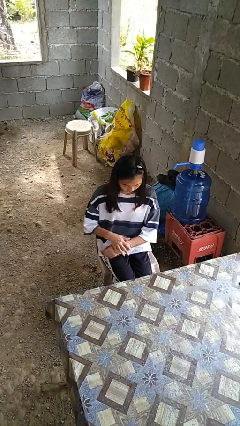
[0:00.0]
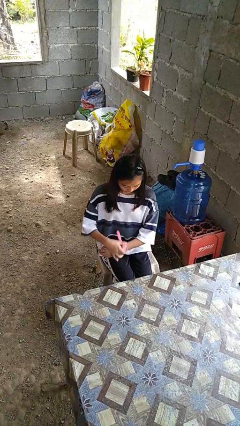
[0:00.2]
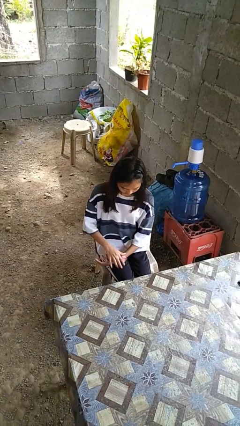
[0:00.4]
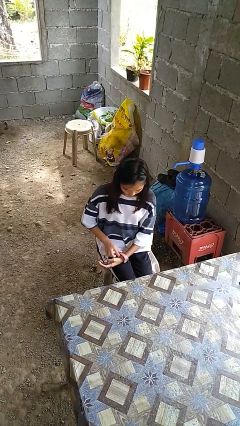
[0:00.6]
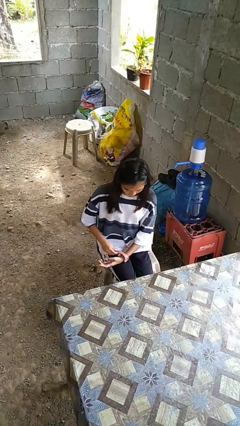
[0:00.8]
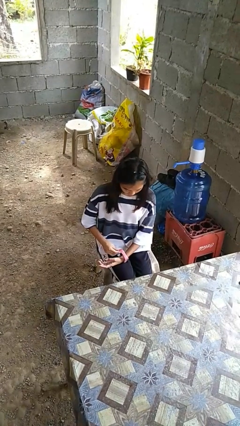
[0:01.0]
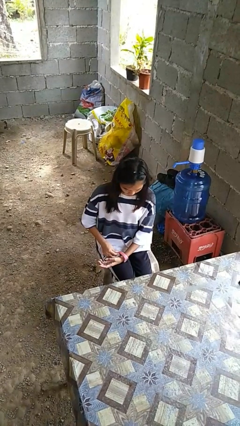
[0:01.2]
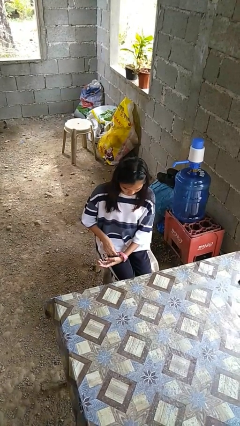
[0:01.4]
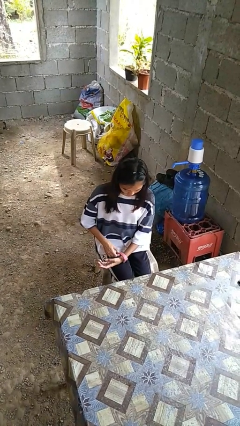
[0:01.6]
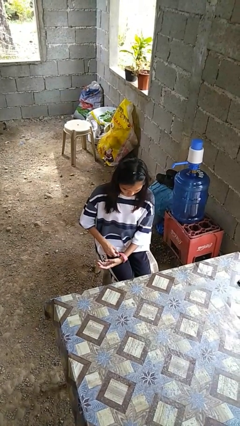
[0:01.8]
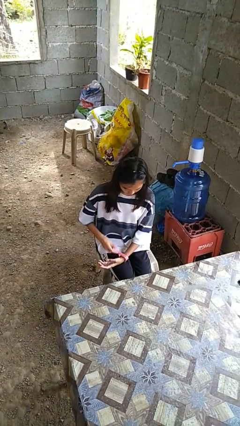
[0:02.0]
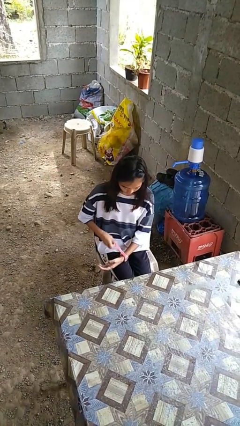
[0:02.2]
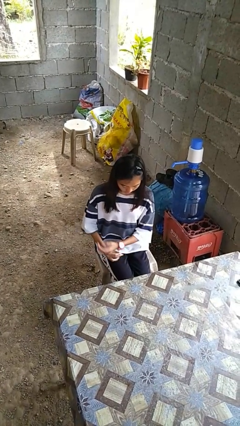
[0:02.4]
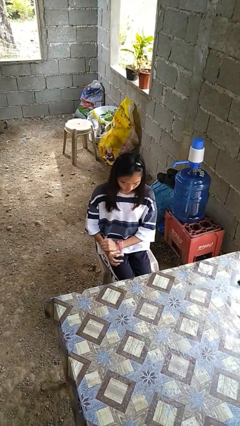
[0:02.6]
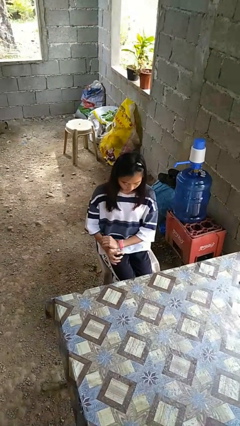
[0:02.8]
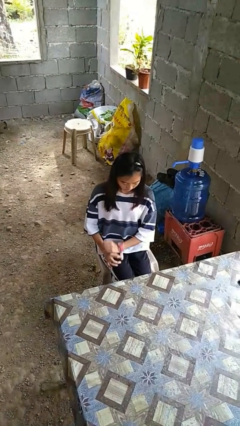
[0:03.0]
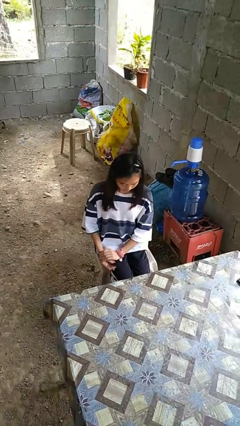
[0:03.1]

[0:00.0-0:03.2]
person puts on wristwatch

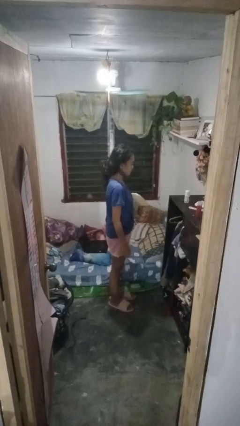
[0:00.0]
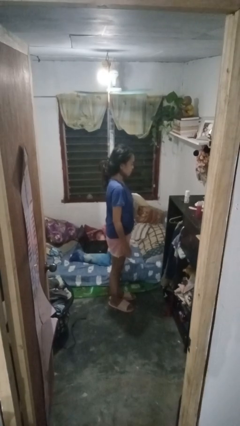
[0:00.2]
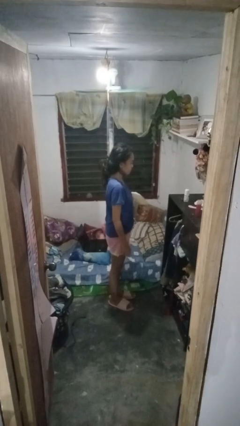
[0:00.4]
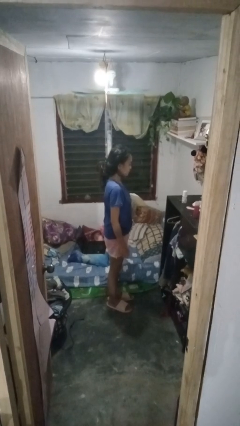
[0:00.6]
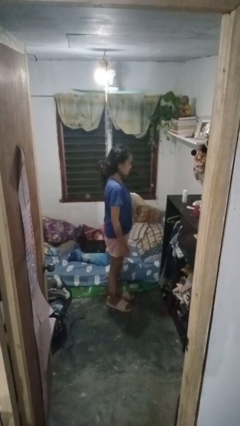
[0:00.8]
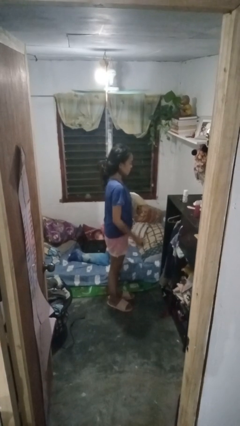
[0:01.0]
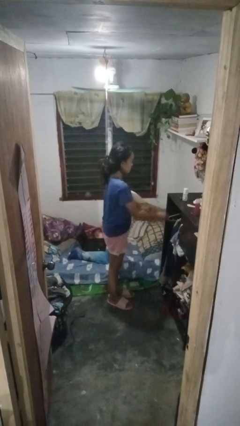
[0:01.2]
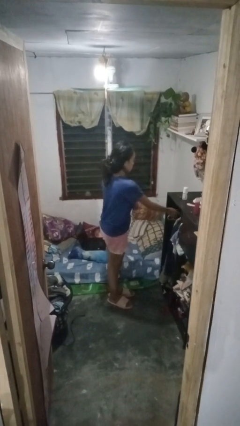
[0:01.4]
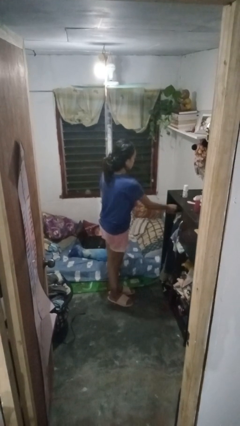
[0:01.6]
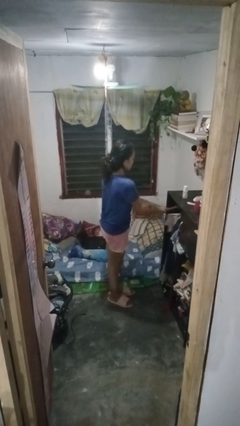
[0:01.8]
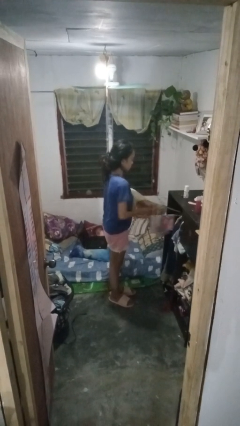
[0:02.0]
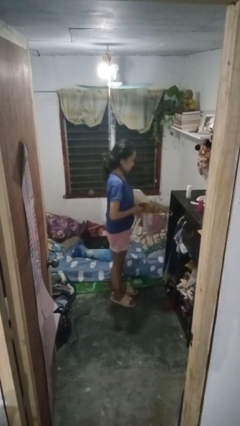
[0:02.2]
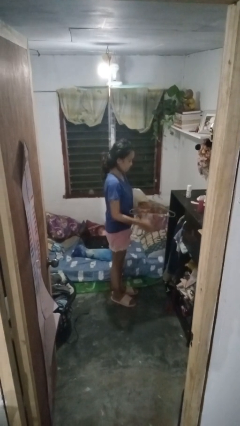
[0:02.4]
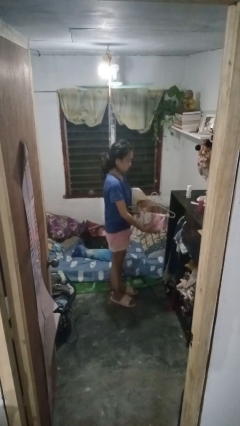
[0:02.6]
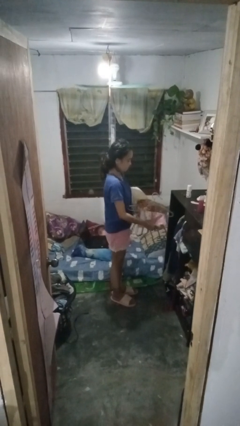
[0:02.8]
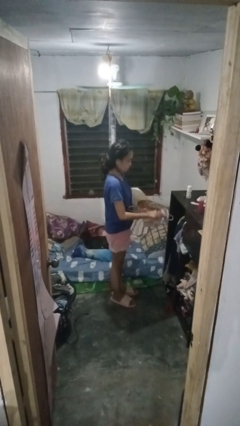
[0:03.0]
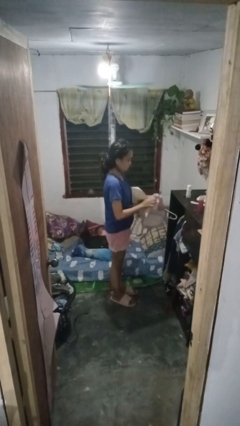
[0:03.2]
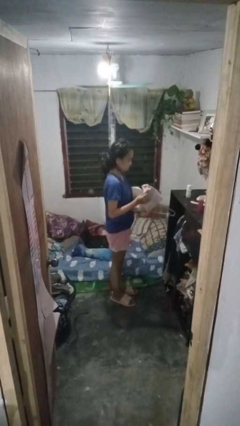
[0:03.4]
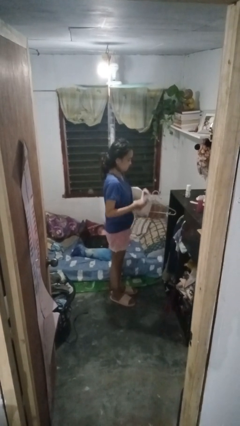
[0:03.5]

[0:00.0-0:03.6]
person takes clothes from closet

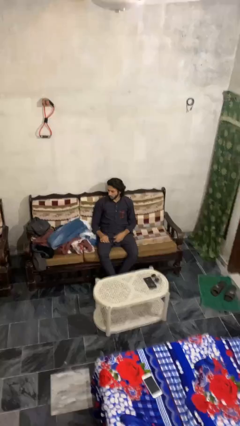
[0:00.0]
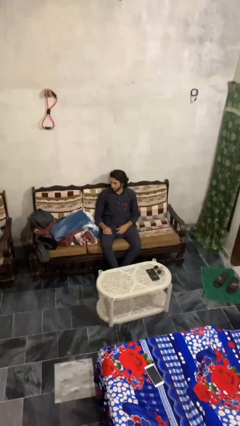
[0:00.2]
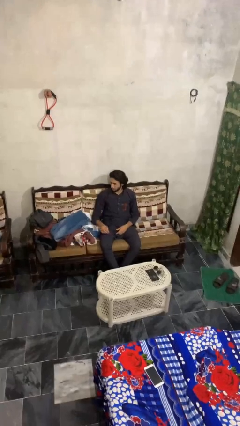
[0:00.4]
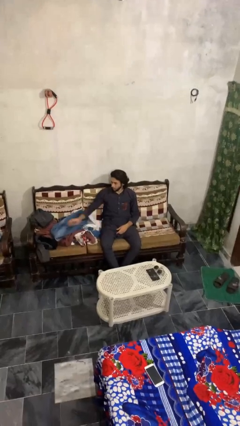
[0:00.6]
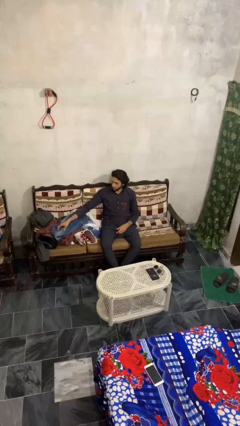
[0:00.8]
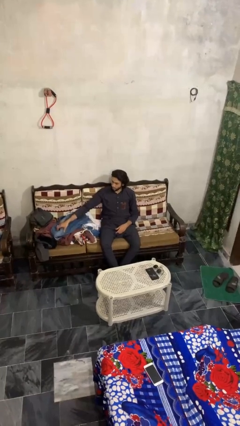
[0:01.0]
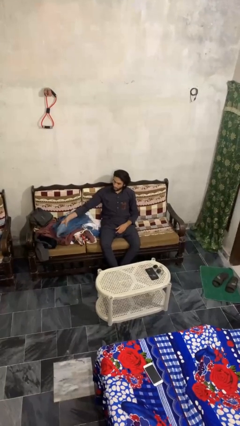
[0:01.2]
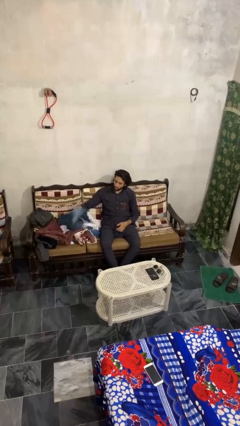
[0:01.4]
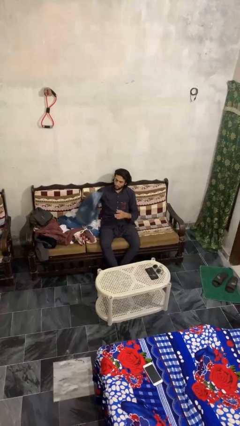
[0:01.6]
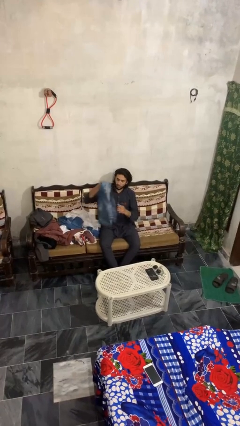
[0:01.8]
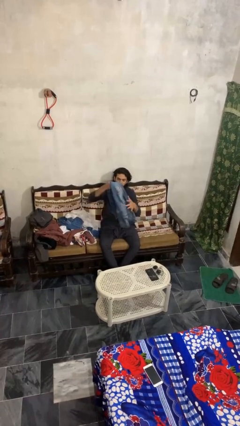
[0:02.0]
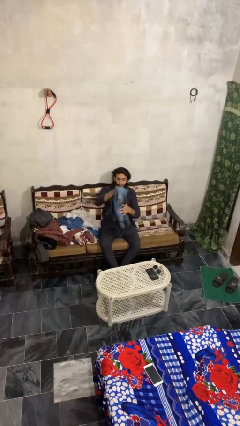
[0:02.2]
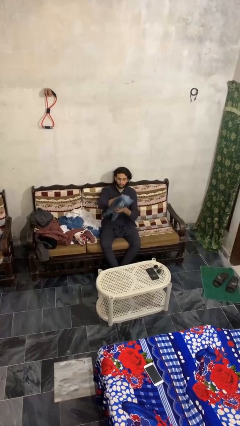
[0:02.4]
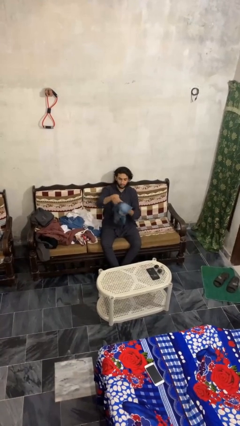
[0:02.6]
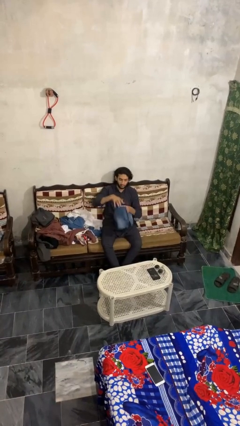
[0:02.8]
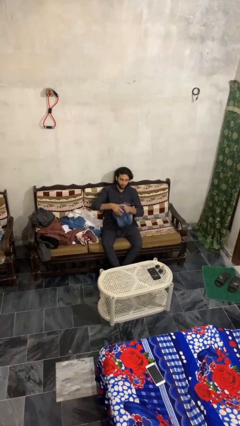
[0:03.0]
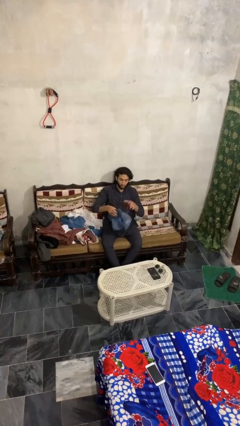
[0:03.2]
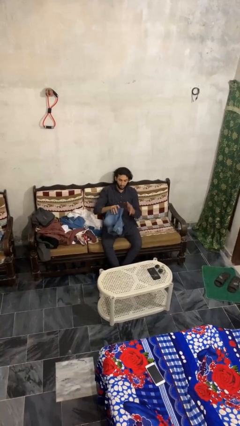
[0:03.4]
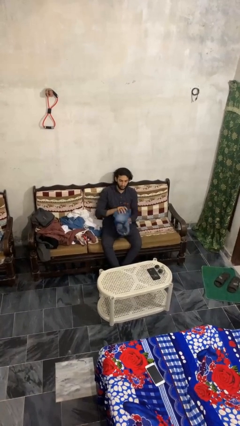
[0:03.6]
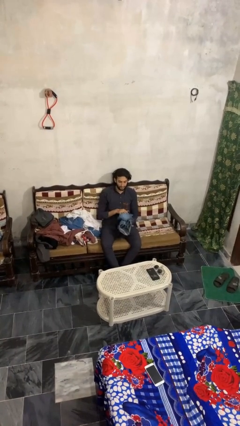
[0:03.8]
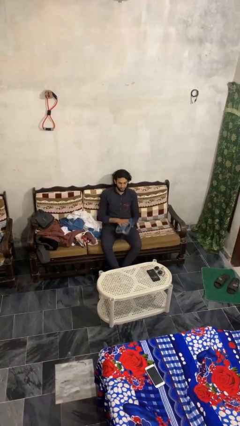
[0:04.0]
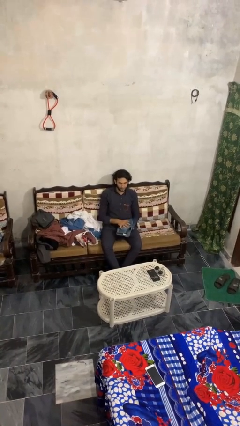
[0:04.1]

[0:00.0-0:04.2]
person folds pants

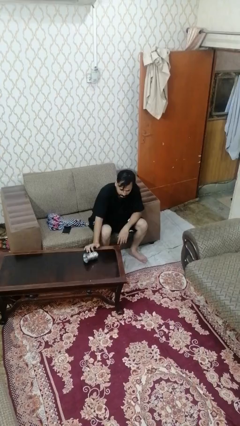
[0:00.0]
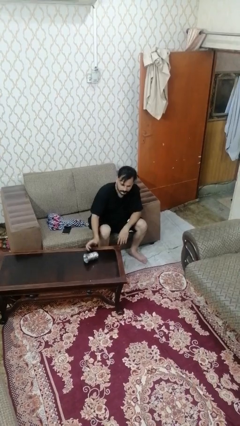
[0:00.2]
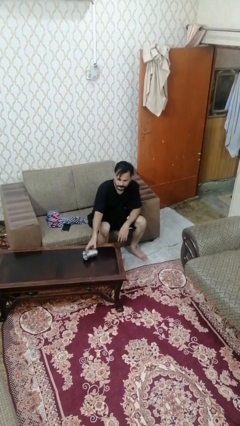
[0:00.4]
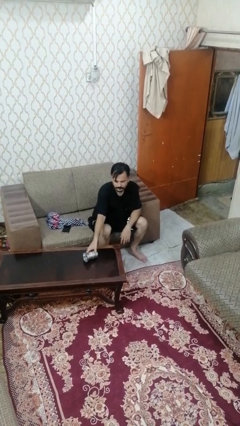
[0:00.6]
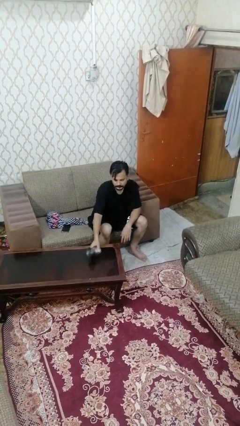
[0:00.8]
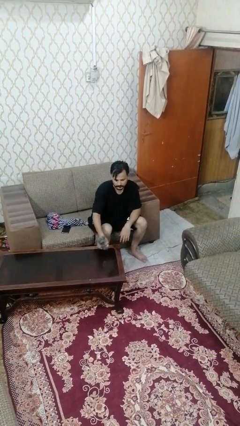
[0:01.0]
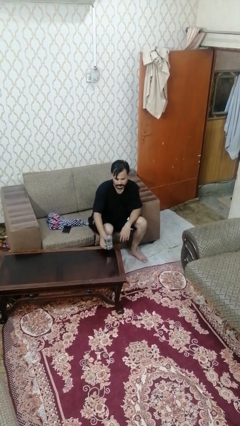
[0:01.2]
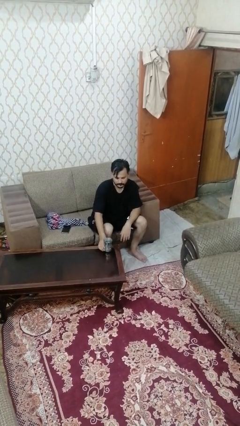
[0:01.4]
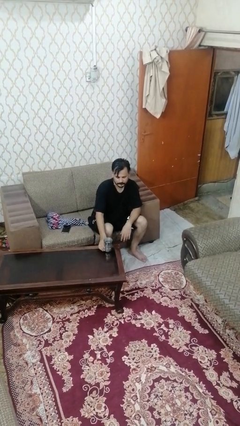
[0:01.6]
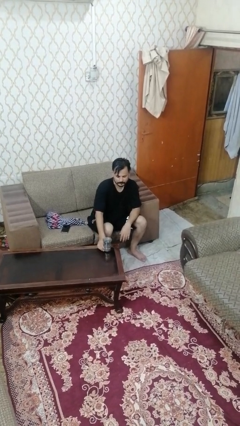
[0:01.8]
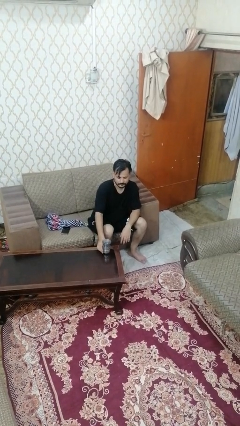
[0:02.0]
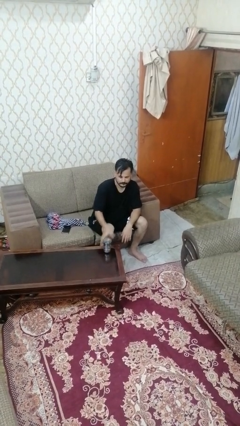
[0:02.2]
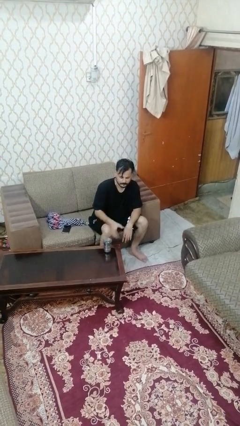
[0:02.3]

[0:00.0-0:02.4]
person sets upright glass

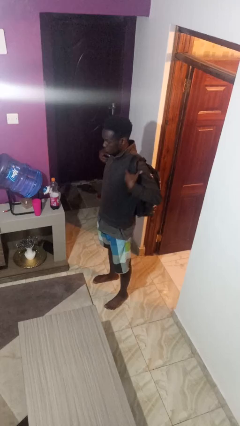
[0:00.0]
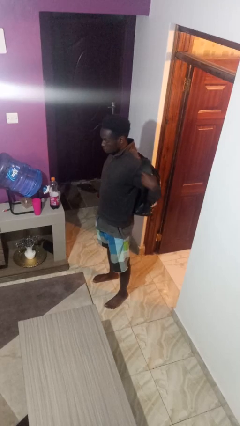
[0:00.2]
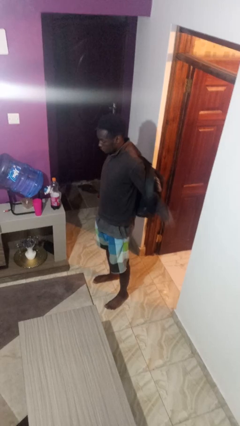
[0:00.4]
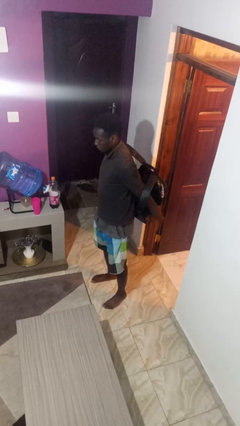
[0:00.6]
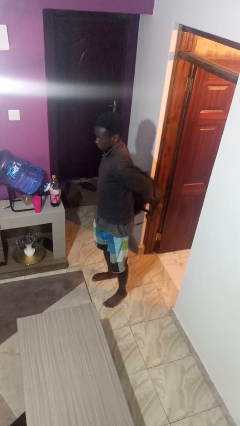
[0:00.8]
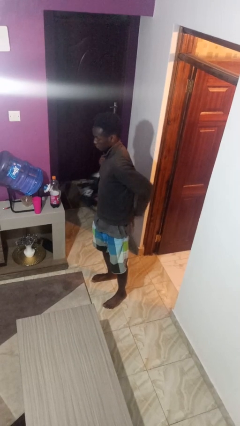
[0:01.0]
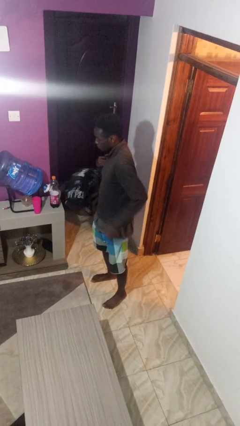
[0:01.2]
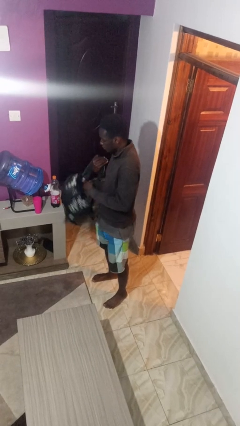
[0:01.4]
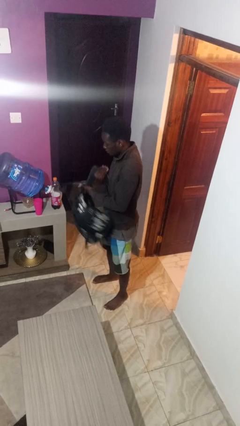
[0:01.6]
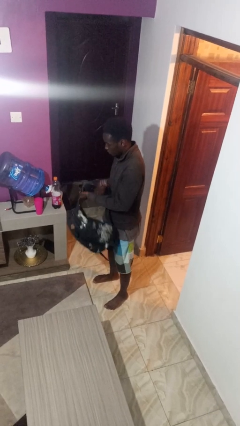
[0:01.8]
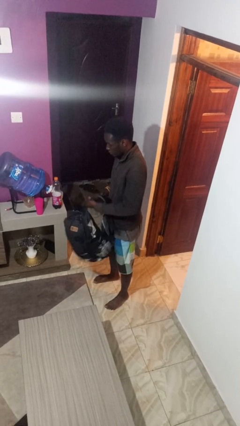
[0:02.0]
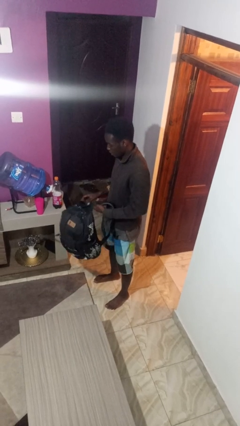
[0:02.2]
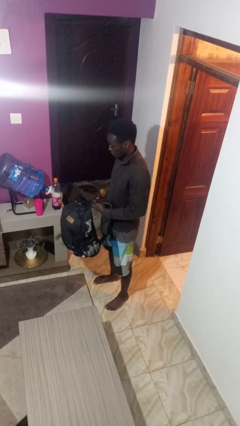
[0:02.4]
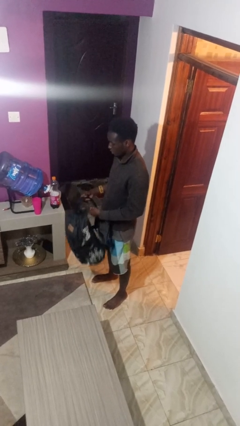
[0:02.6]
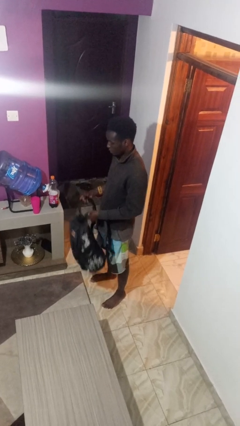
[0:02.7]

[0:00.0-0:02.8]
person takes off backpack

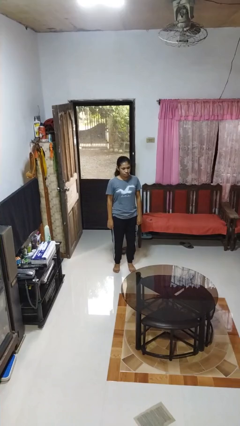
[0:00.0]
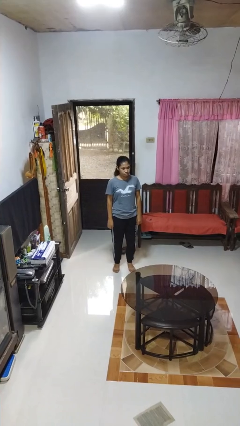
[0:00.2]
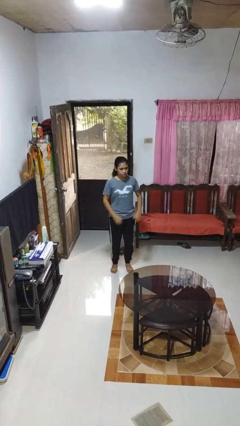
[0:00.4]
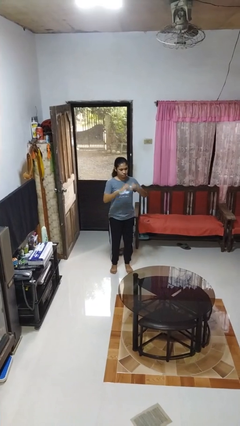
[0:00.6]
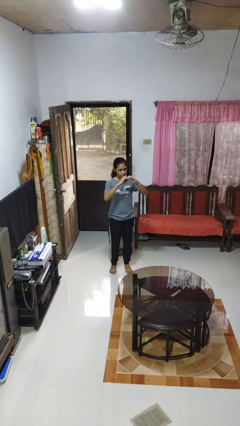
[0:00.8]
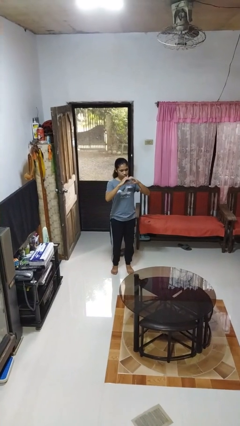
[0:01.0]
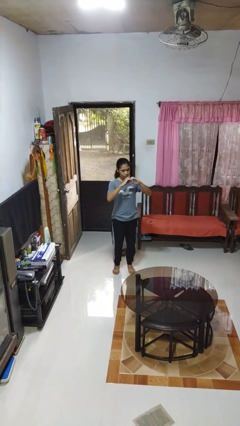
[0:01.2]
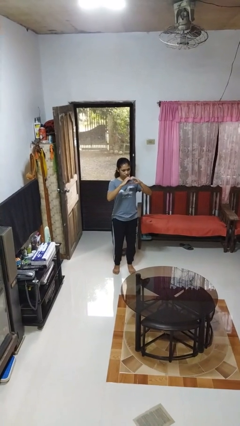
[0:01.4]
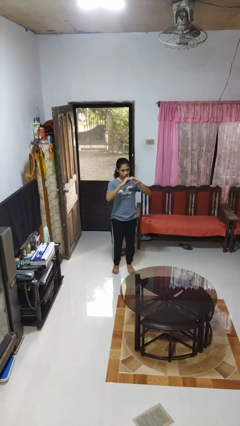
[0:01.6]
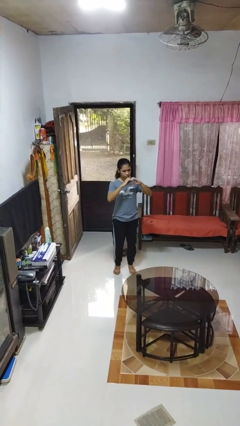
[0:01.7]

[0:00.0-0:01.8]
person gestures heart
